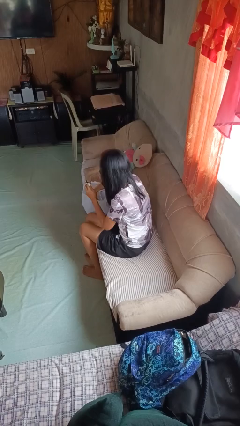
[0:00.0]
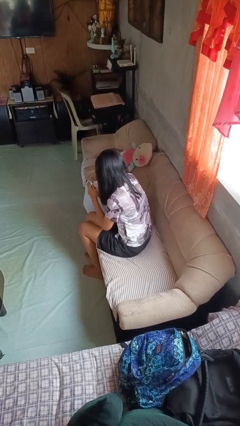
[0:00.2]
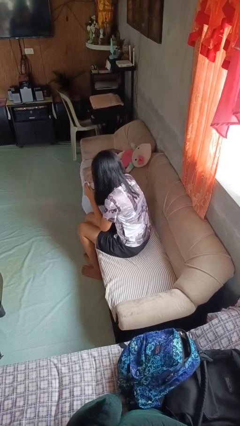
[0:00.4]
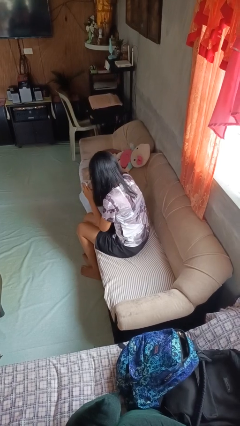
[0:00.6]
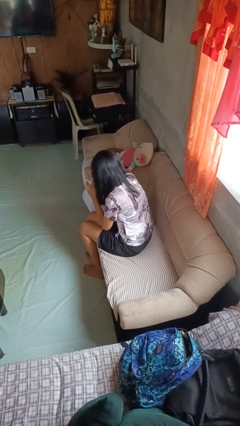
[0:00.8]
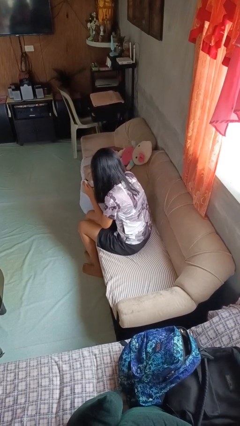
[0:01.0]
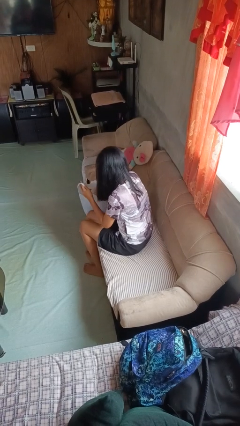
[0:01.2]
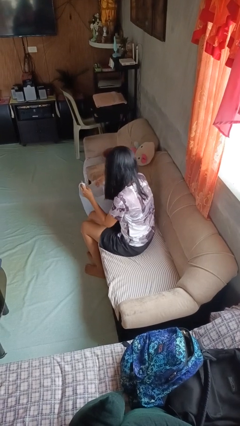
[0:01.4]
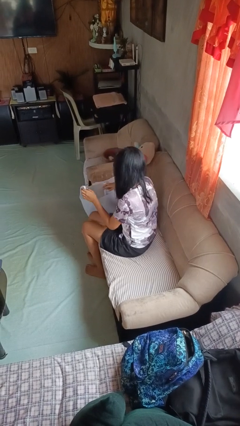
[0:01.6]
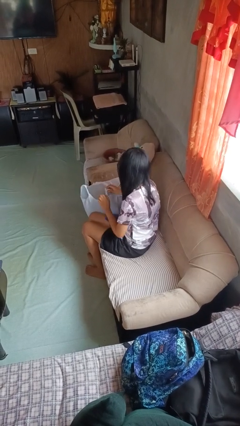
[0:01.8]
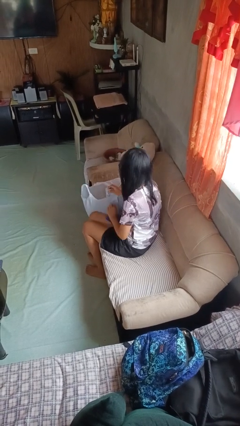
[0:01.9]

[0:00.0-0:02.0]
person searches in bag

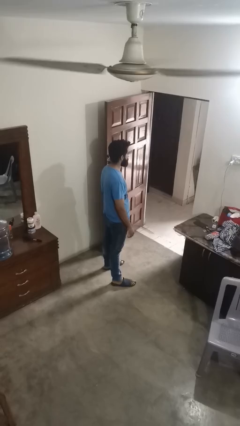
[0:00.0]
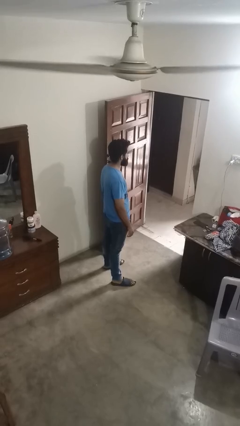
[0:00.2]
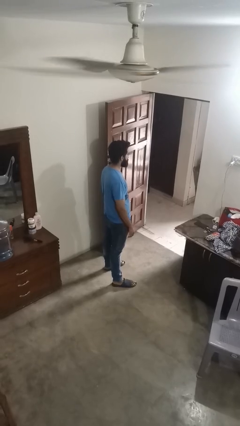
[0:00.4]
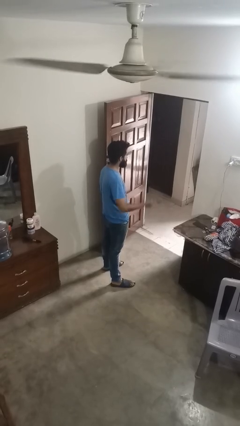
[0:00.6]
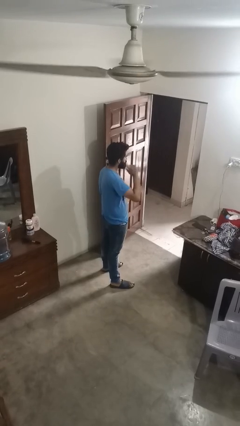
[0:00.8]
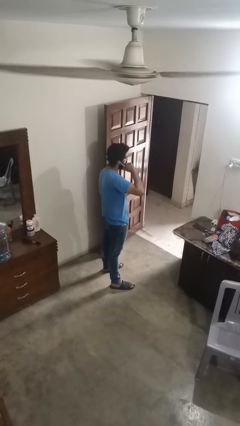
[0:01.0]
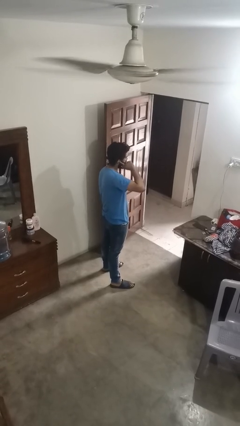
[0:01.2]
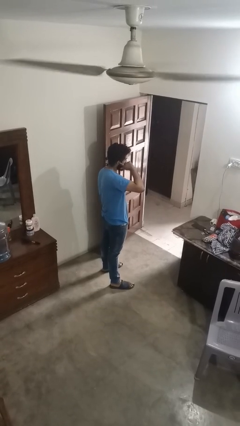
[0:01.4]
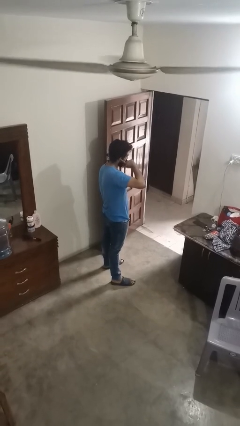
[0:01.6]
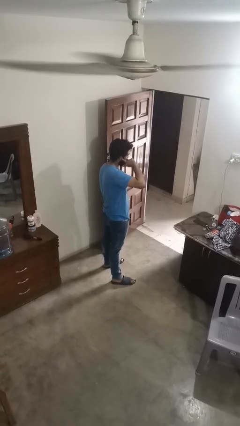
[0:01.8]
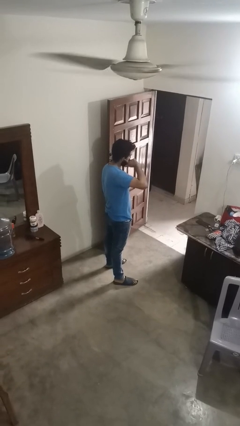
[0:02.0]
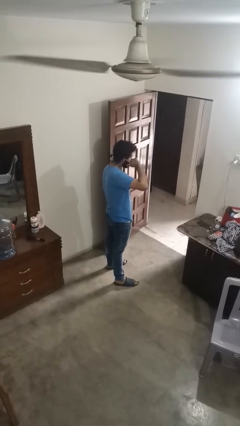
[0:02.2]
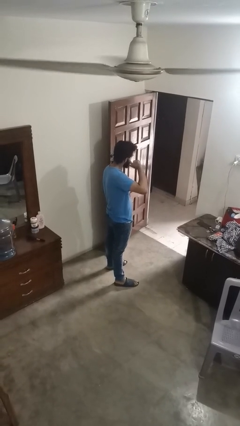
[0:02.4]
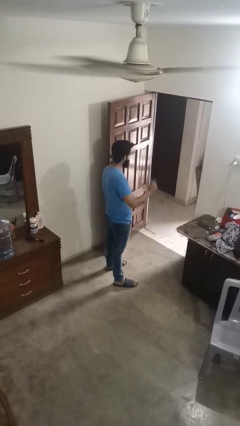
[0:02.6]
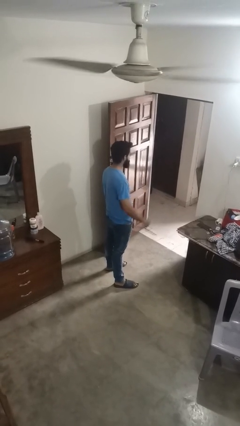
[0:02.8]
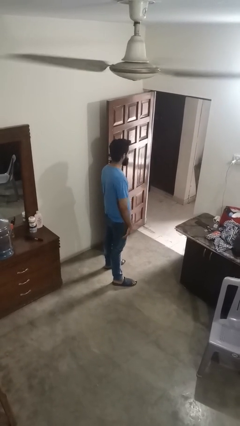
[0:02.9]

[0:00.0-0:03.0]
person touches earlobe

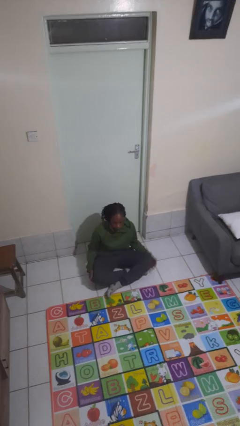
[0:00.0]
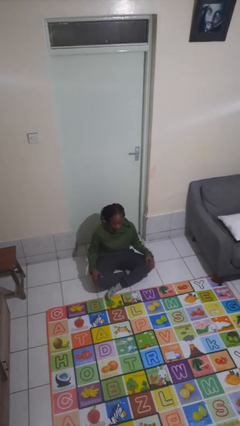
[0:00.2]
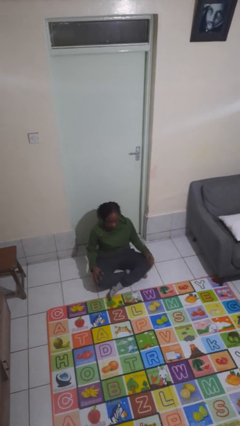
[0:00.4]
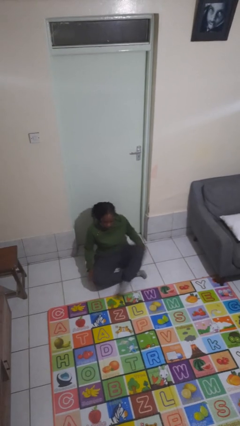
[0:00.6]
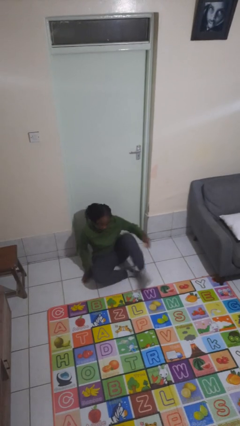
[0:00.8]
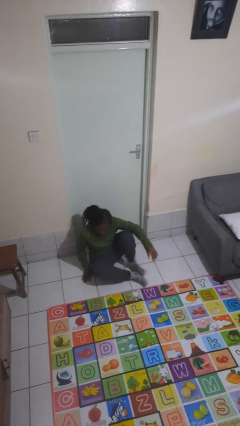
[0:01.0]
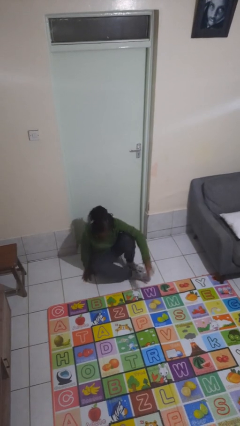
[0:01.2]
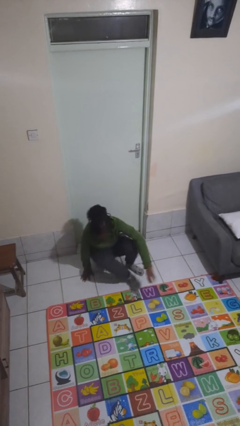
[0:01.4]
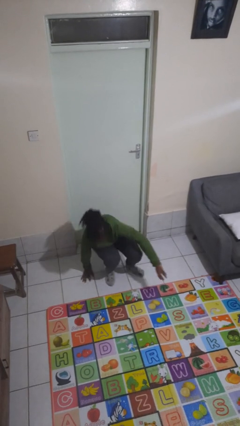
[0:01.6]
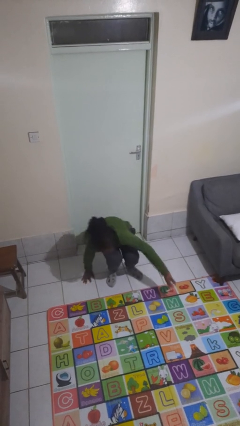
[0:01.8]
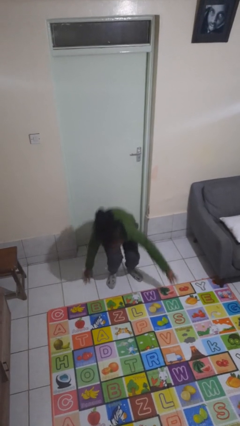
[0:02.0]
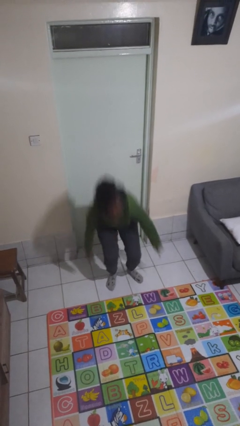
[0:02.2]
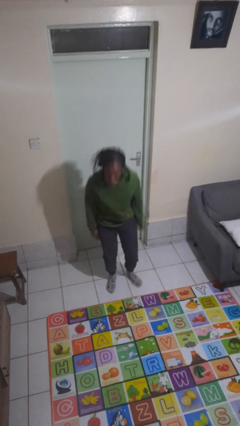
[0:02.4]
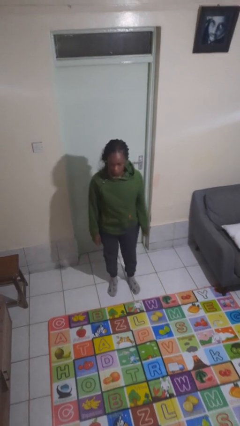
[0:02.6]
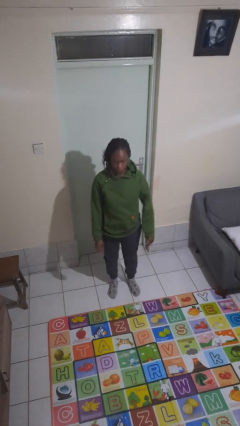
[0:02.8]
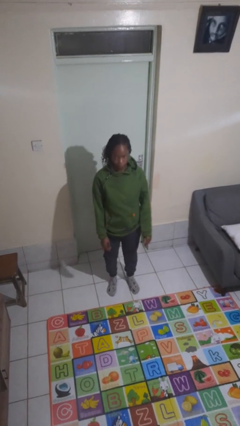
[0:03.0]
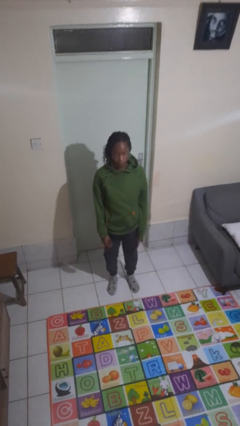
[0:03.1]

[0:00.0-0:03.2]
person stands up from floor

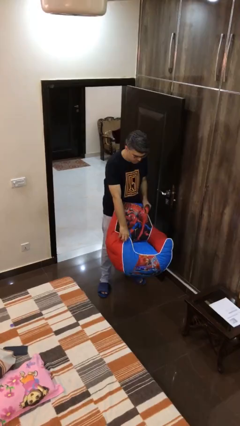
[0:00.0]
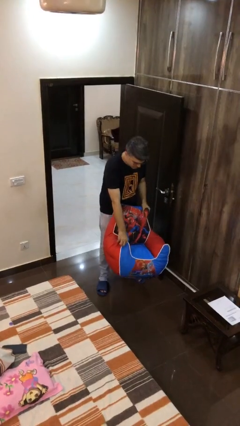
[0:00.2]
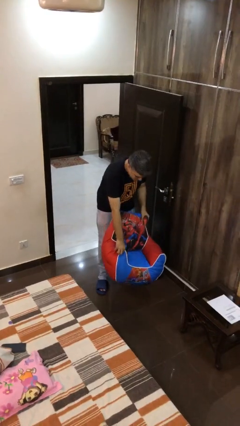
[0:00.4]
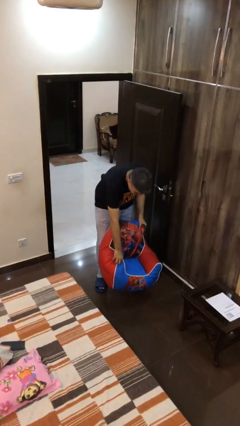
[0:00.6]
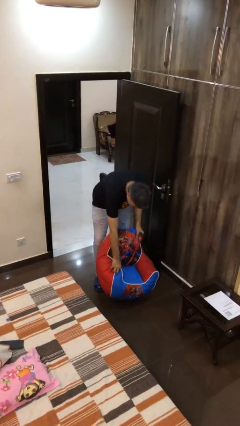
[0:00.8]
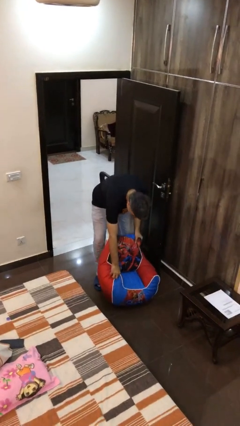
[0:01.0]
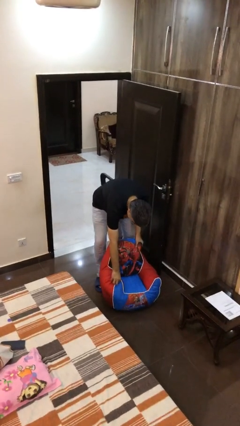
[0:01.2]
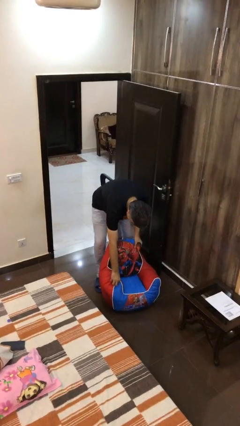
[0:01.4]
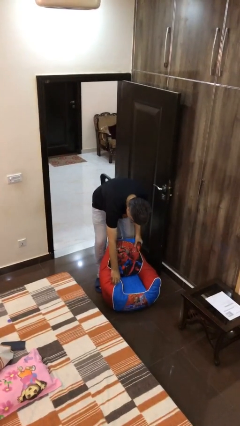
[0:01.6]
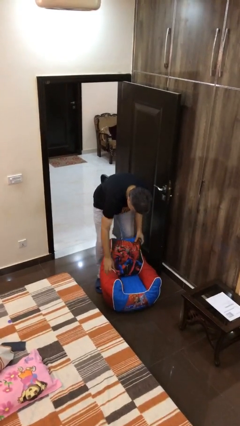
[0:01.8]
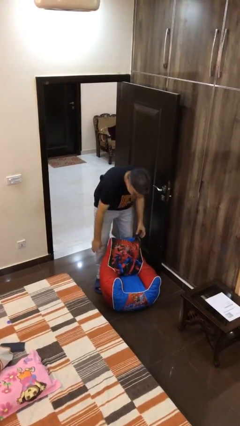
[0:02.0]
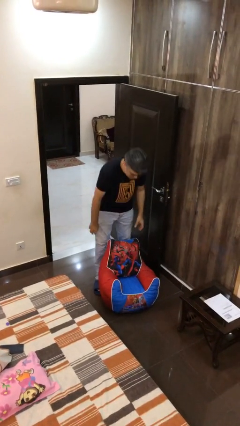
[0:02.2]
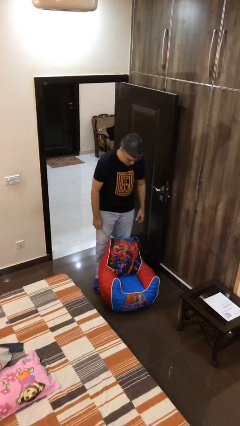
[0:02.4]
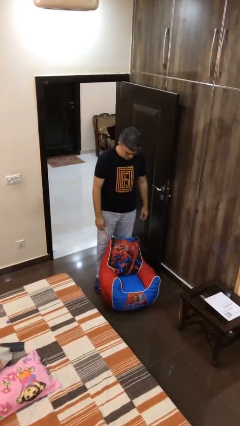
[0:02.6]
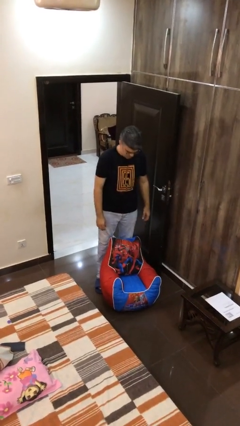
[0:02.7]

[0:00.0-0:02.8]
person puts down object on floor

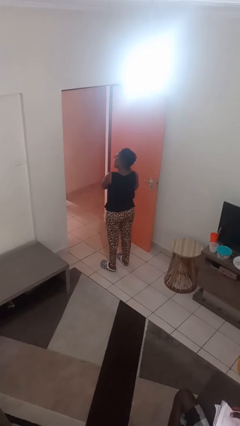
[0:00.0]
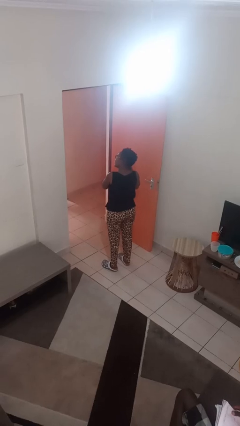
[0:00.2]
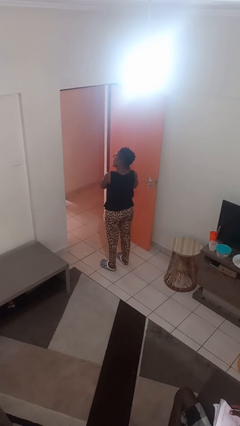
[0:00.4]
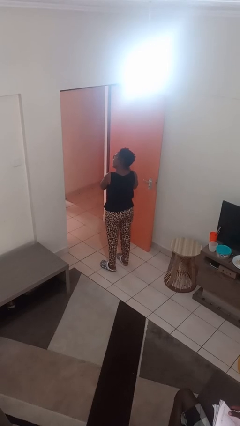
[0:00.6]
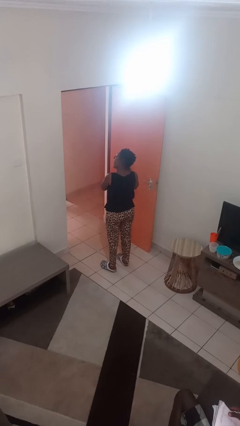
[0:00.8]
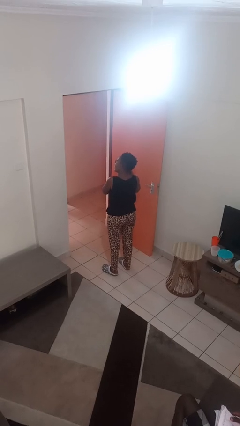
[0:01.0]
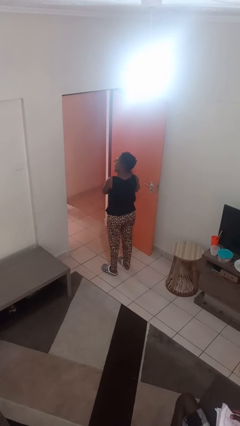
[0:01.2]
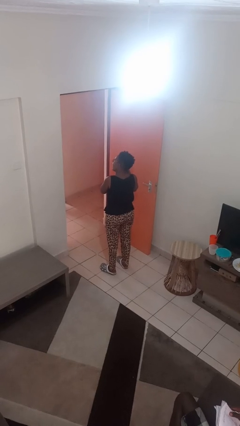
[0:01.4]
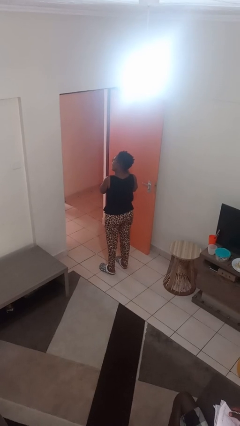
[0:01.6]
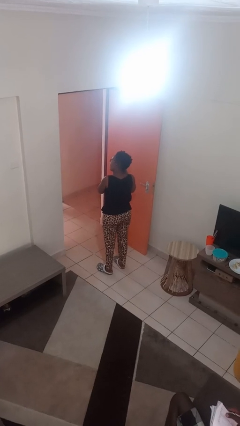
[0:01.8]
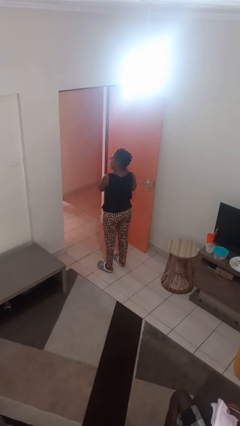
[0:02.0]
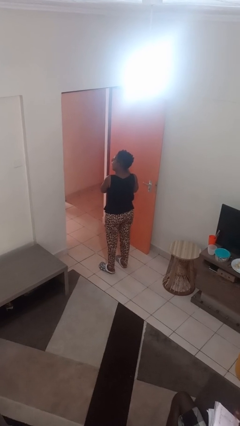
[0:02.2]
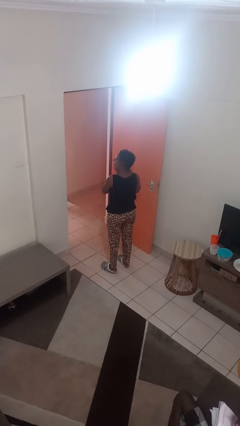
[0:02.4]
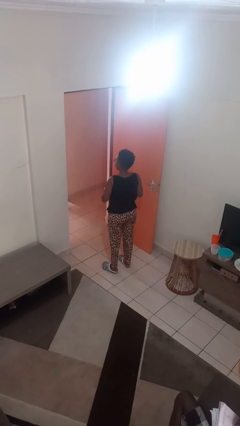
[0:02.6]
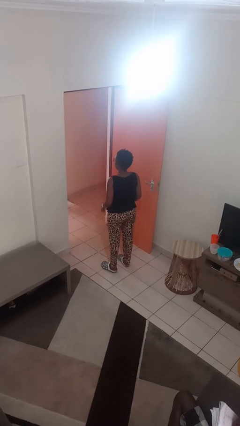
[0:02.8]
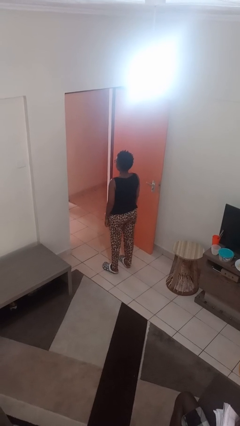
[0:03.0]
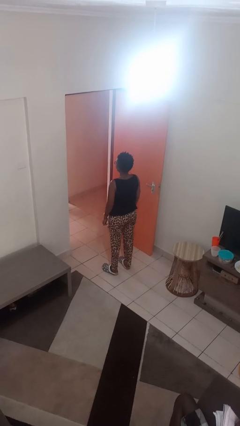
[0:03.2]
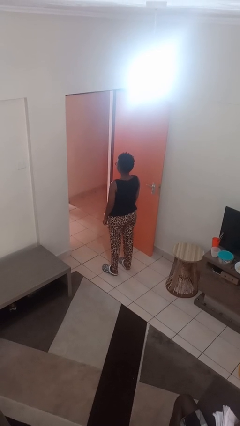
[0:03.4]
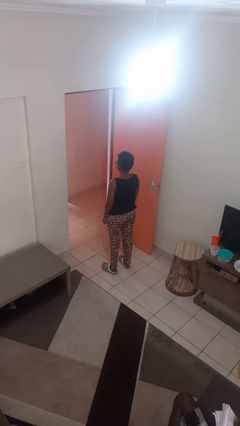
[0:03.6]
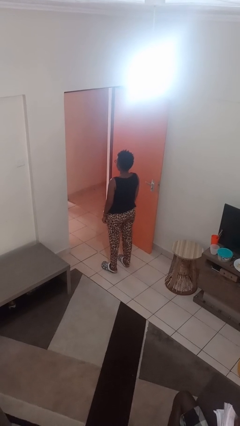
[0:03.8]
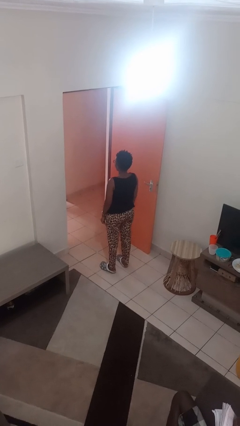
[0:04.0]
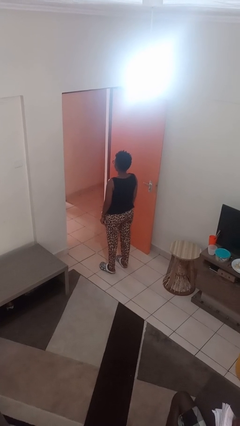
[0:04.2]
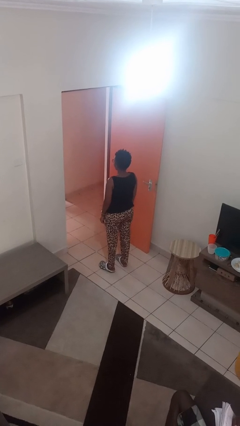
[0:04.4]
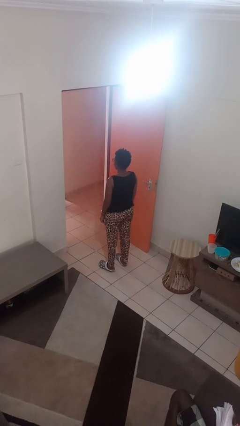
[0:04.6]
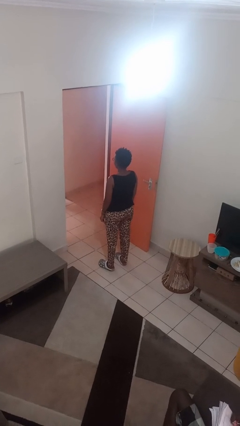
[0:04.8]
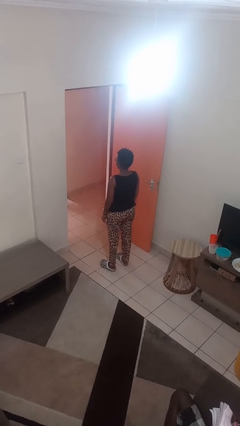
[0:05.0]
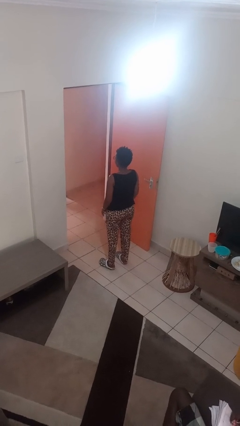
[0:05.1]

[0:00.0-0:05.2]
person puts on earrings

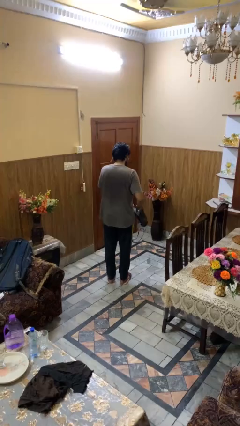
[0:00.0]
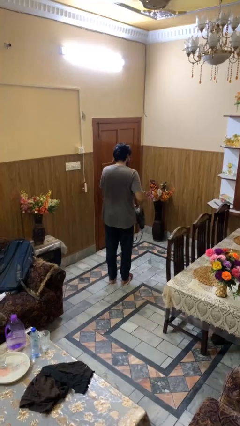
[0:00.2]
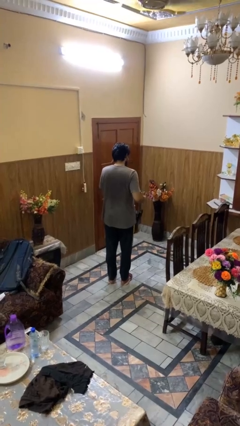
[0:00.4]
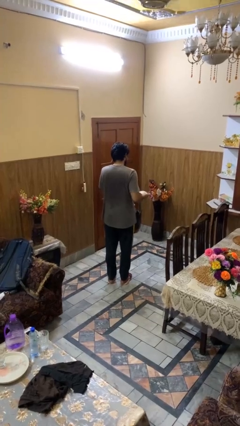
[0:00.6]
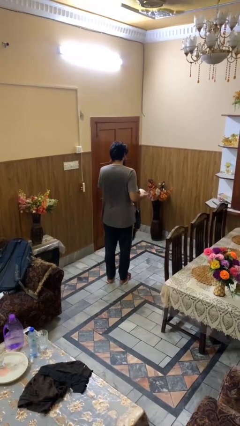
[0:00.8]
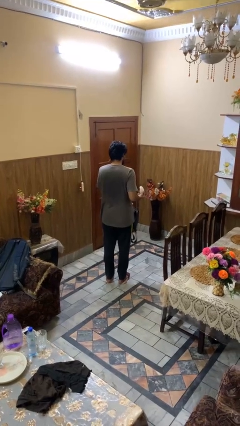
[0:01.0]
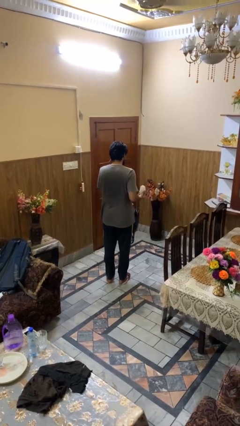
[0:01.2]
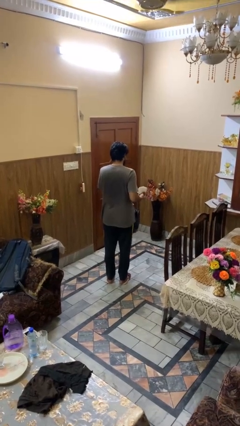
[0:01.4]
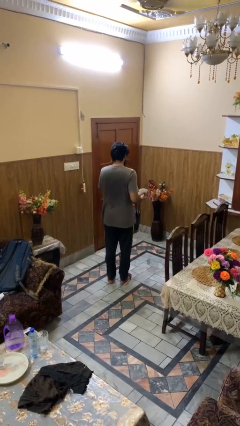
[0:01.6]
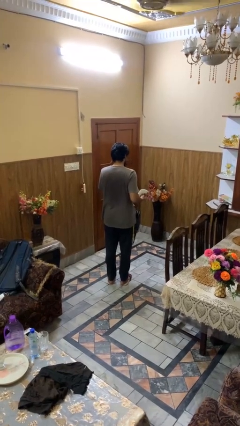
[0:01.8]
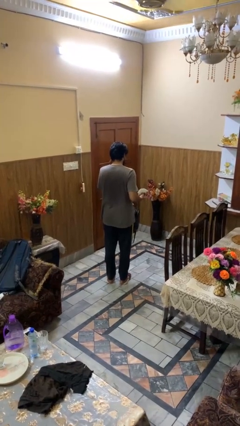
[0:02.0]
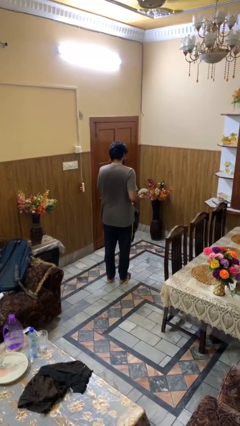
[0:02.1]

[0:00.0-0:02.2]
person takes object from purse
